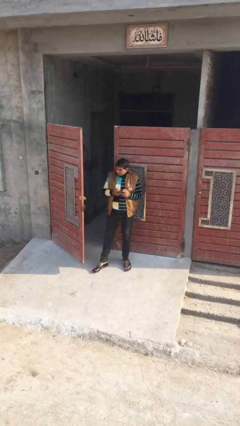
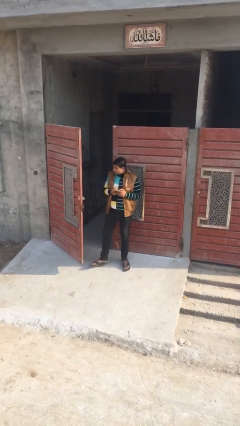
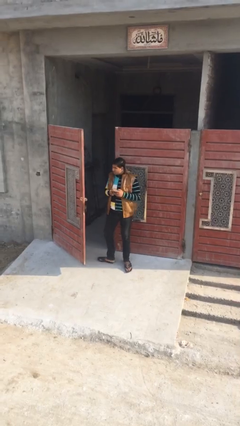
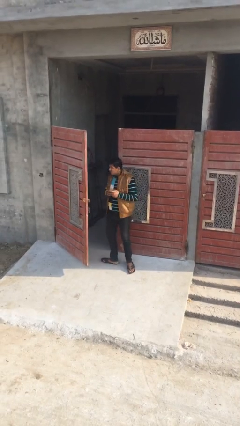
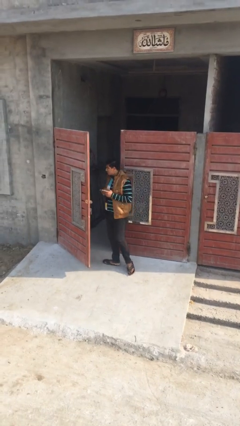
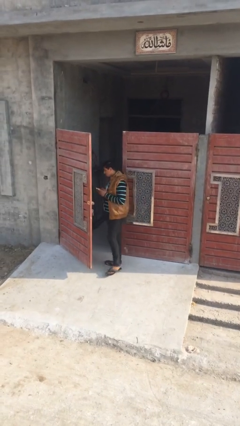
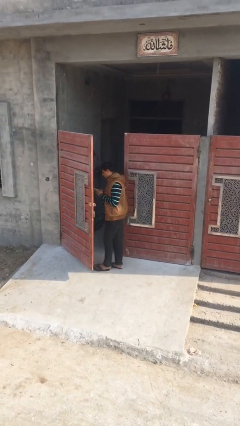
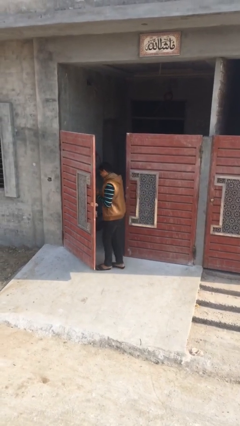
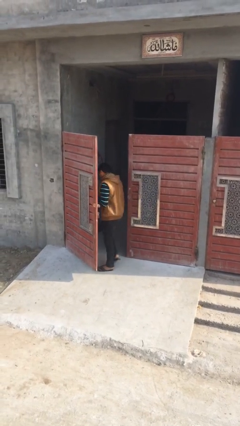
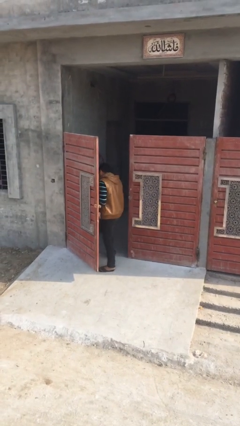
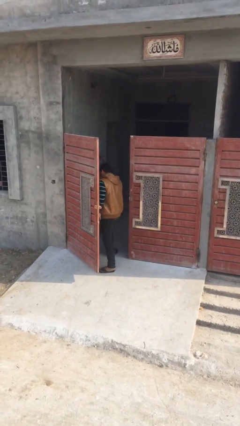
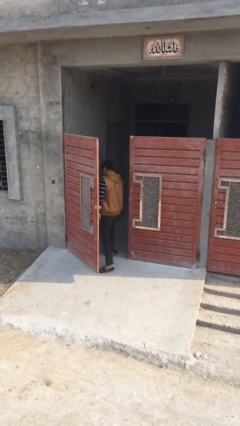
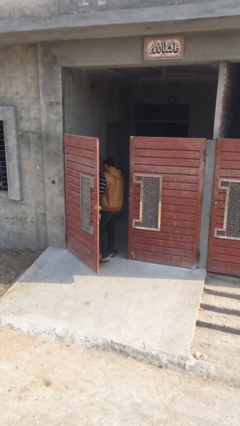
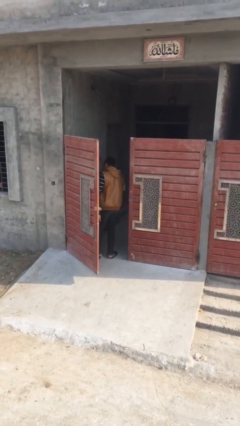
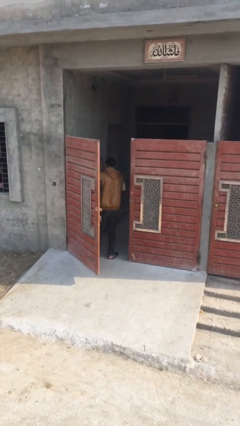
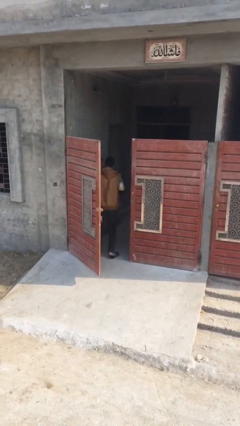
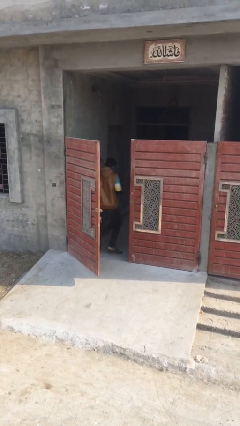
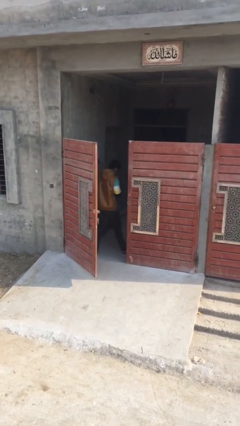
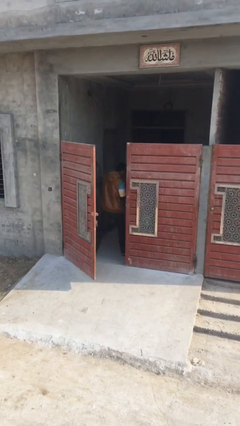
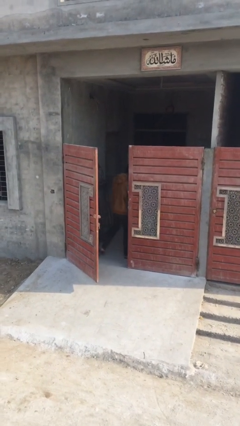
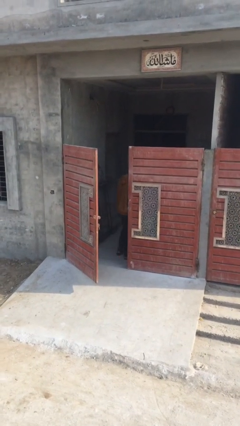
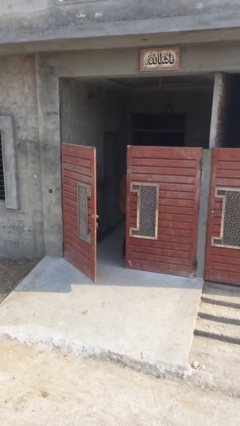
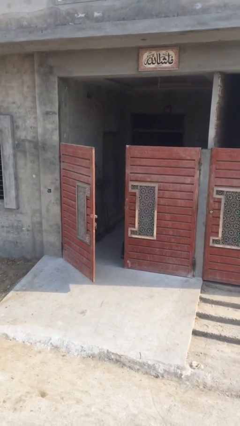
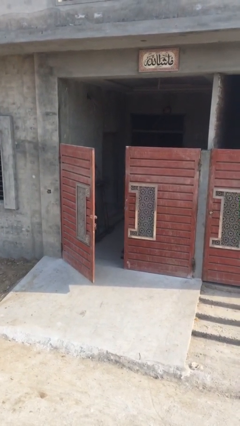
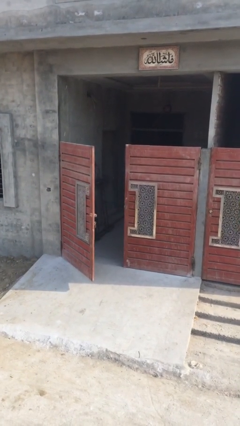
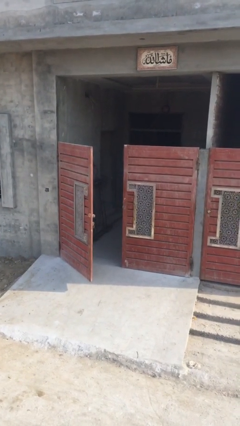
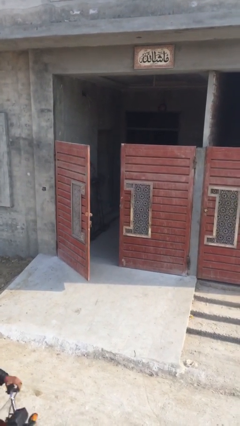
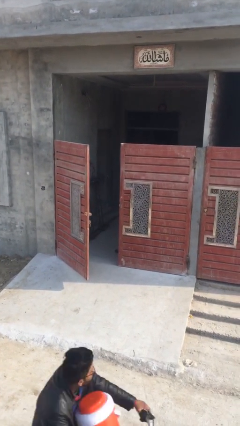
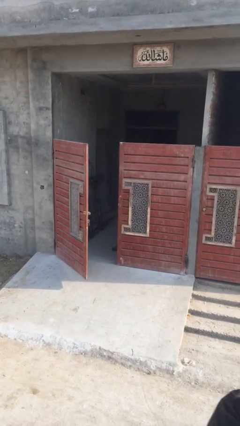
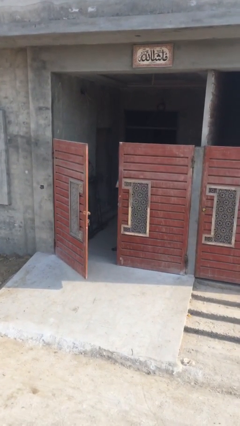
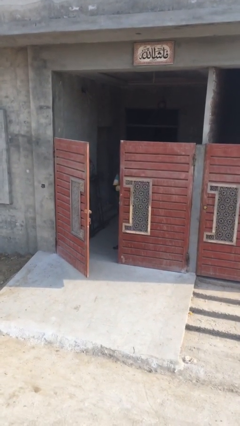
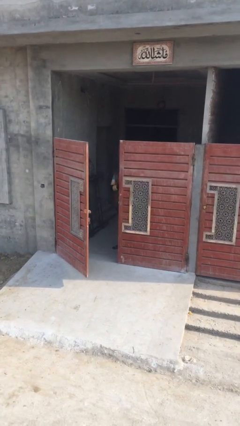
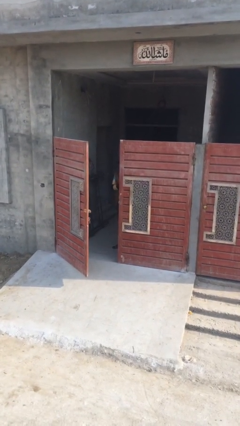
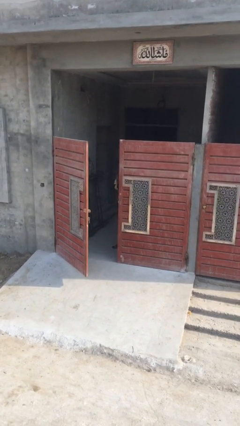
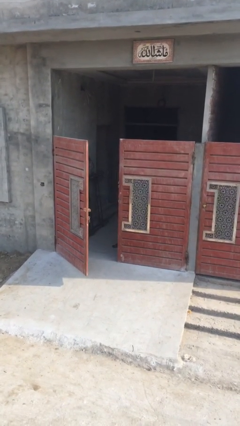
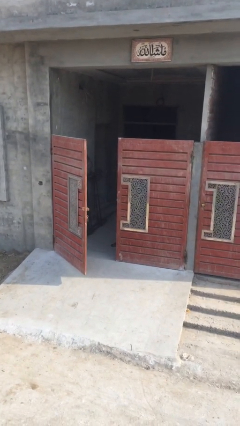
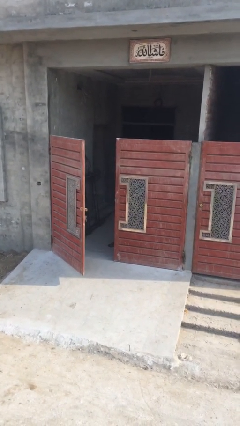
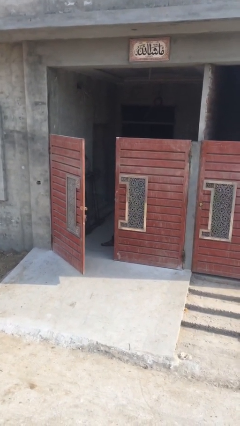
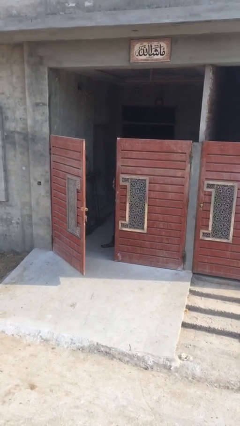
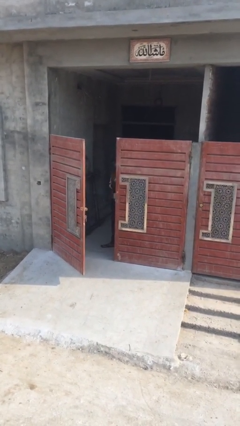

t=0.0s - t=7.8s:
person exits scene through structure

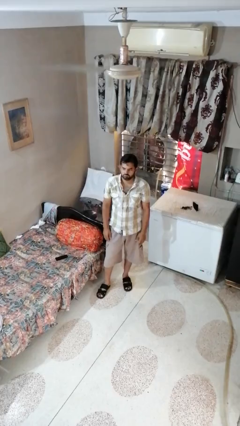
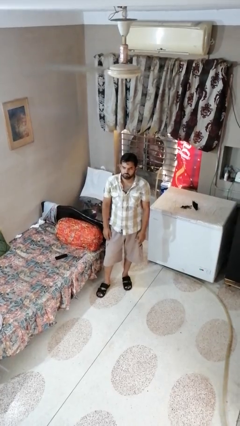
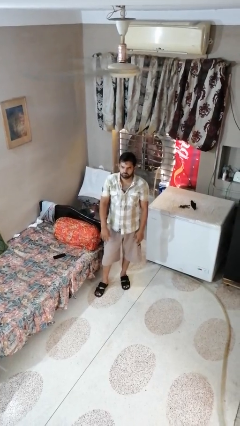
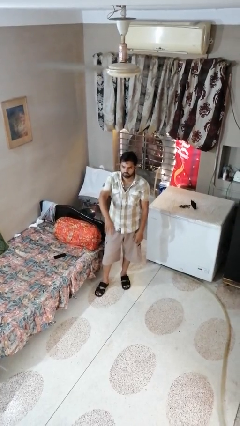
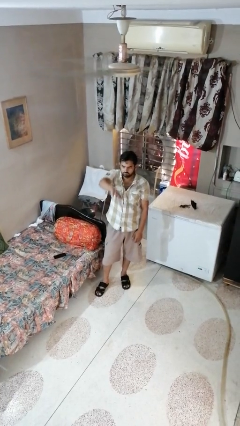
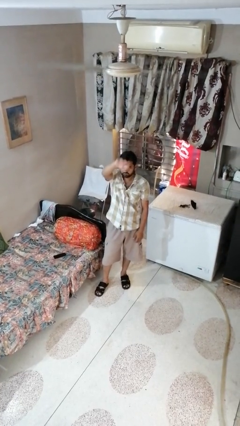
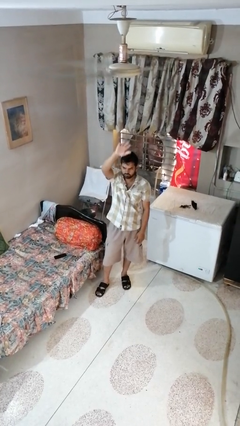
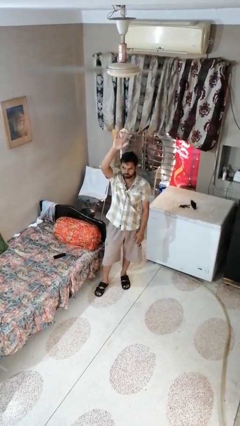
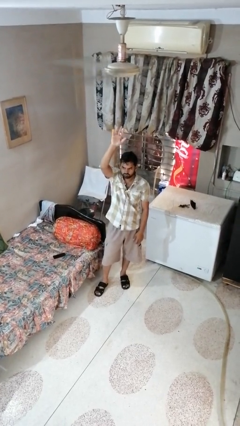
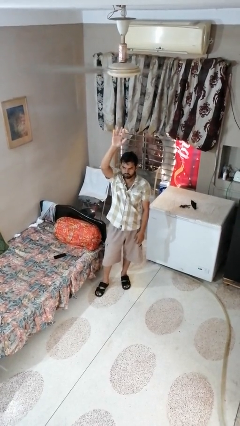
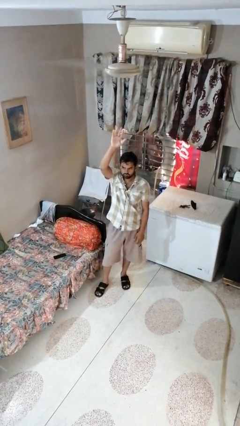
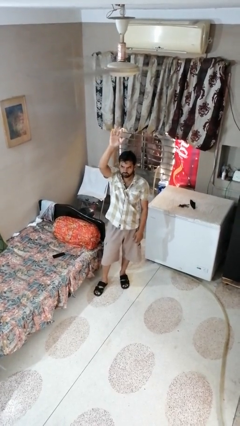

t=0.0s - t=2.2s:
person gestures swipe up

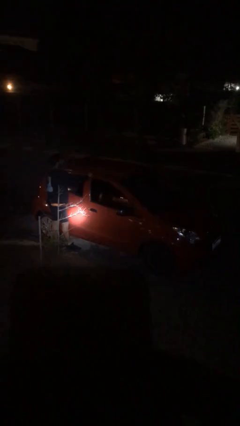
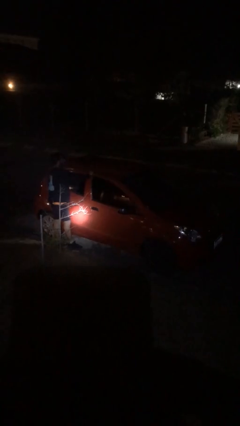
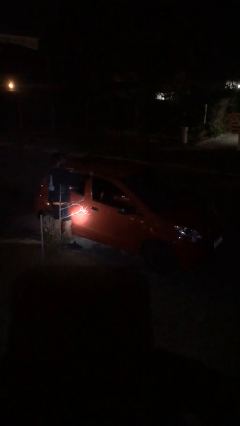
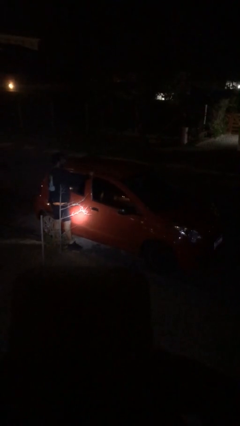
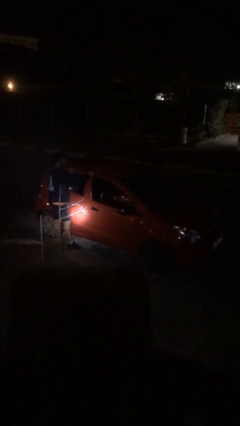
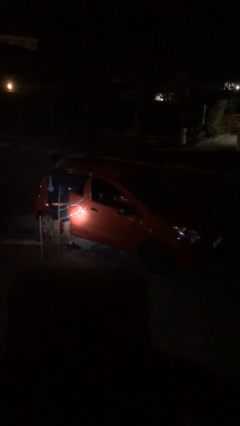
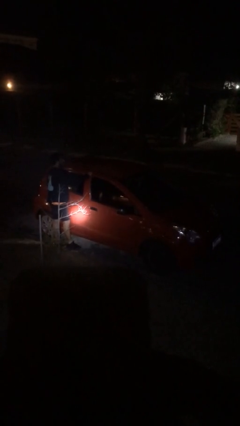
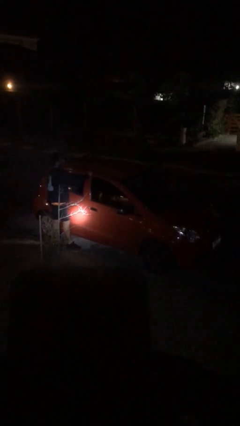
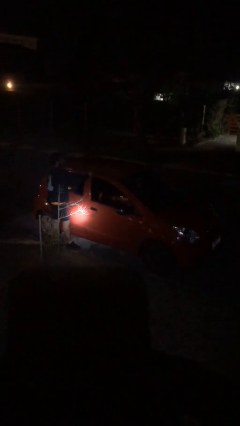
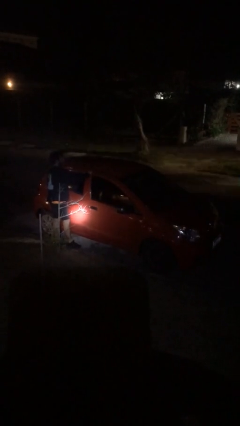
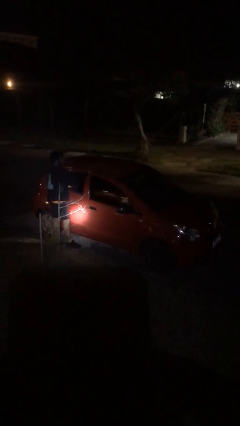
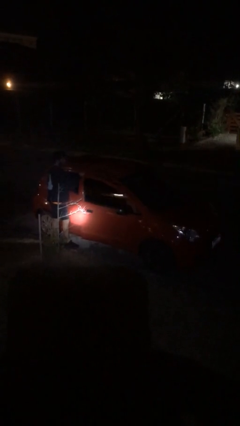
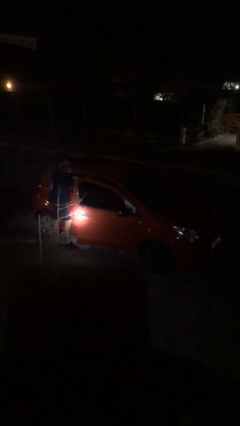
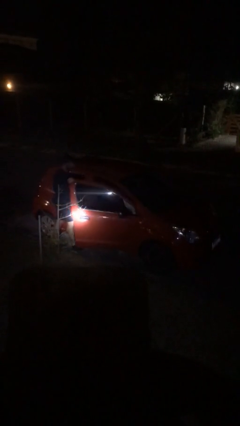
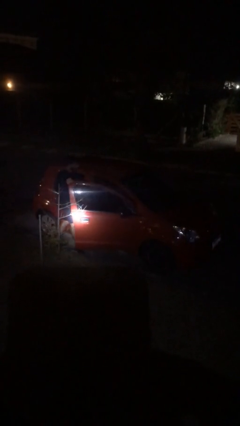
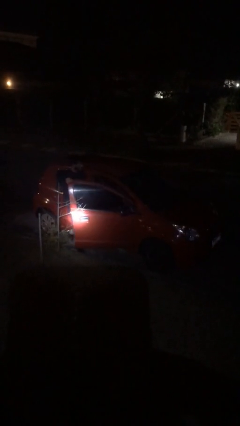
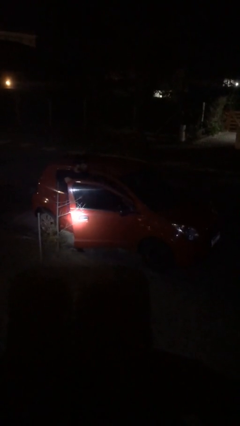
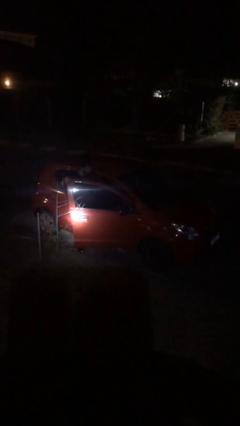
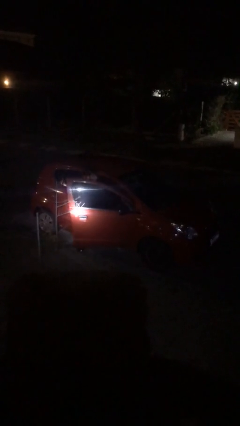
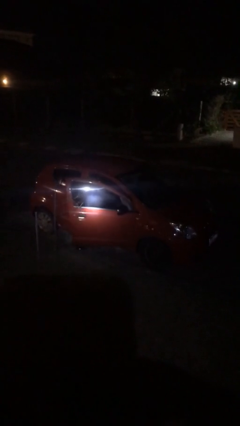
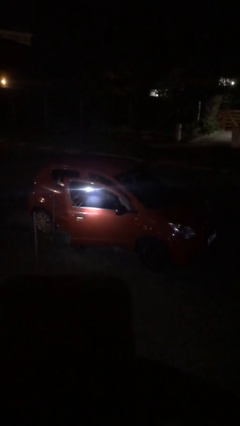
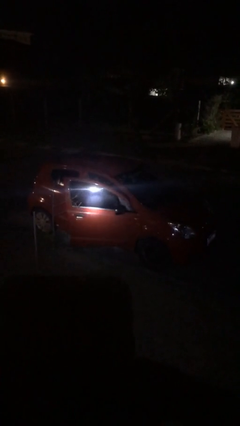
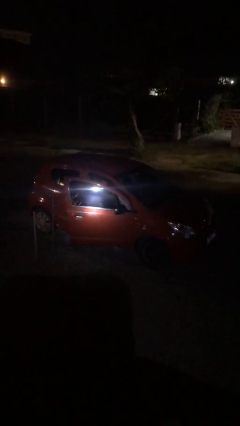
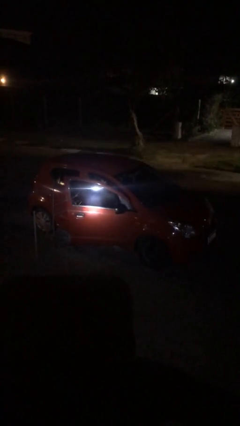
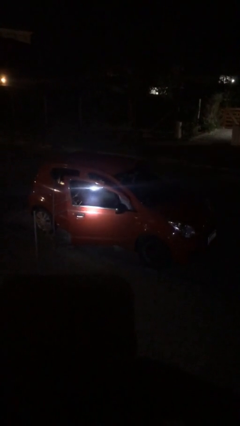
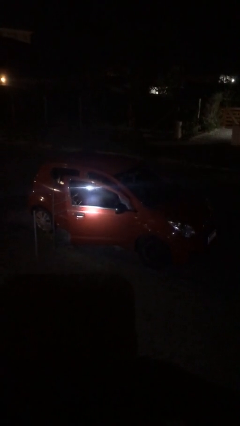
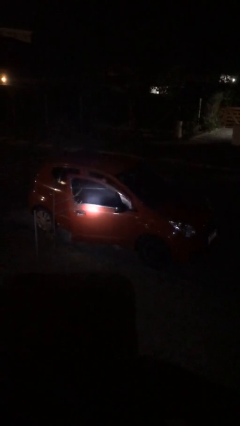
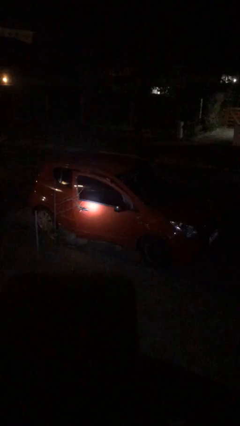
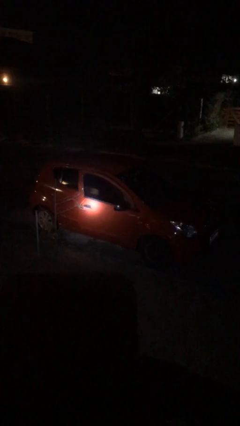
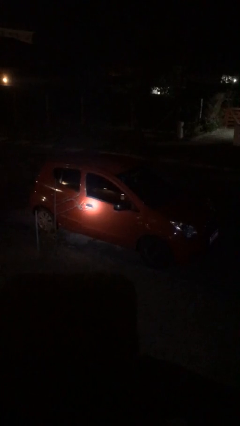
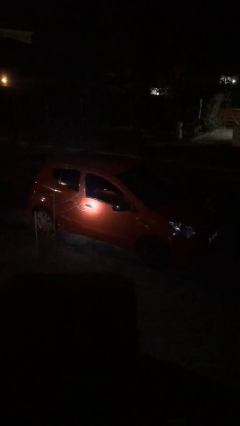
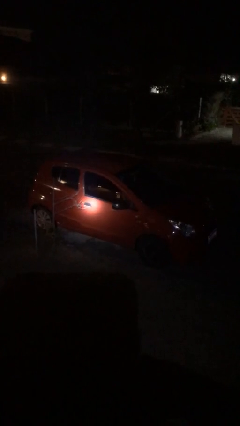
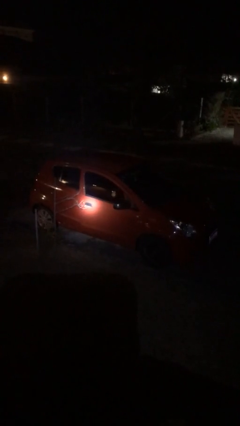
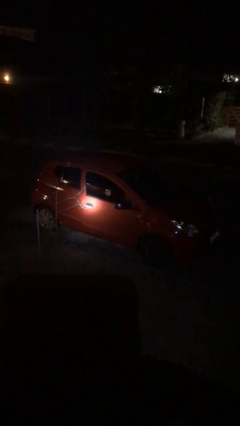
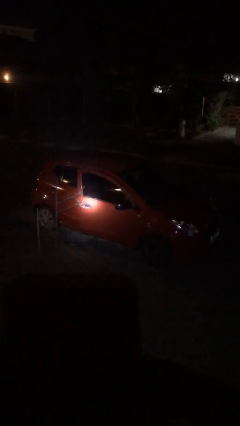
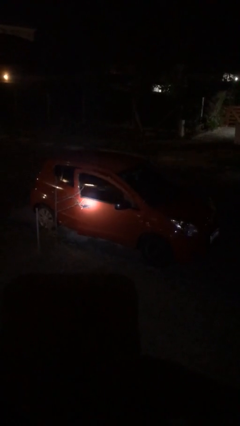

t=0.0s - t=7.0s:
car picks up person

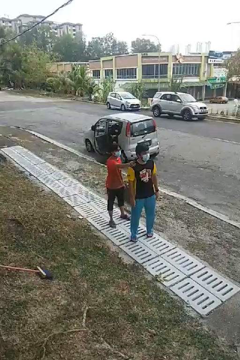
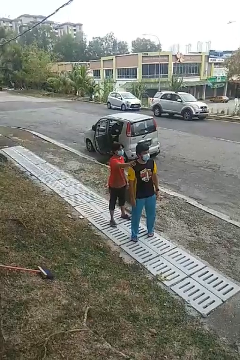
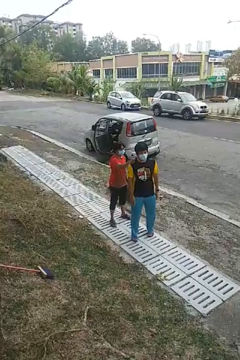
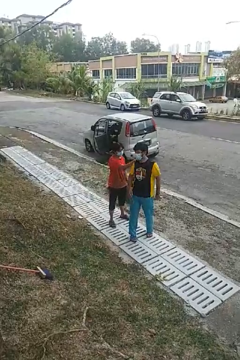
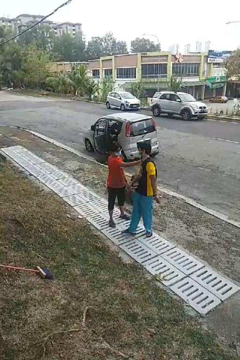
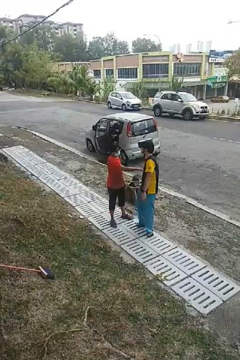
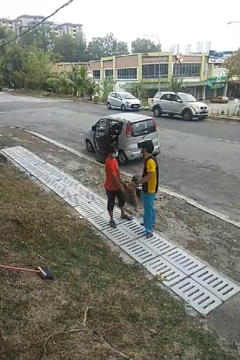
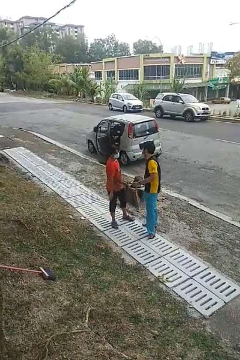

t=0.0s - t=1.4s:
person spins person around
